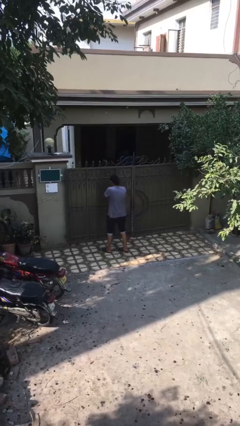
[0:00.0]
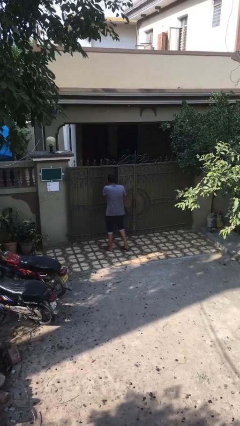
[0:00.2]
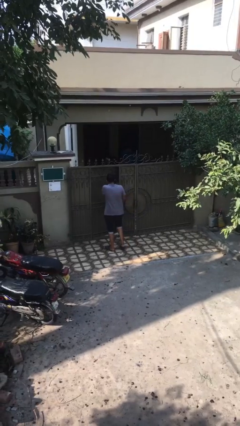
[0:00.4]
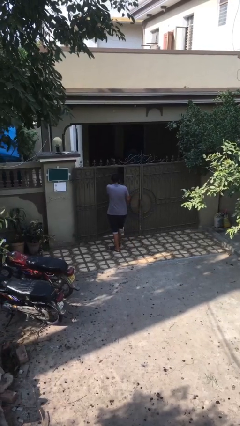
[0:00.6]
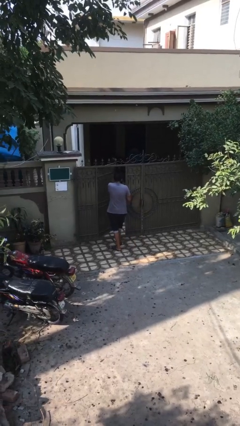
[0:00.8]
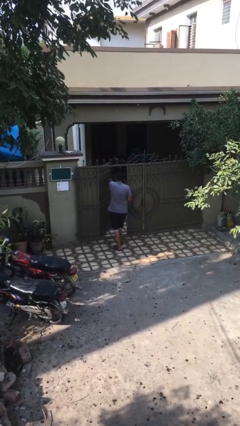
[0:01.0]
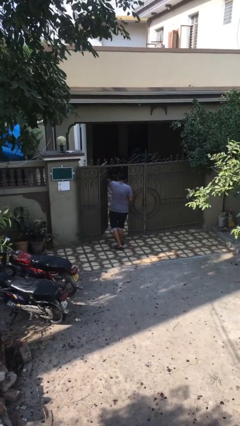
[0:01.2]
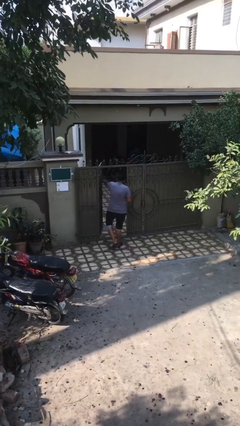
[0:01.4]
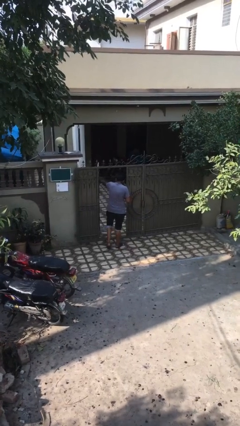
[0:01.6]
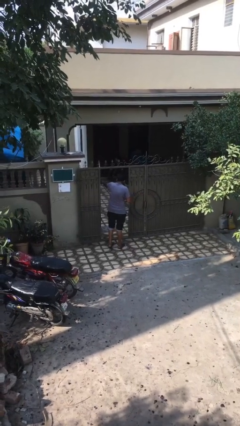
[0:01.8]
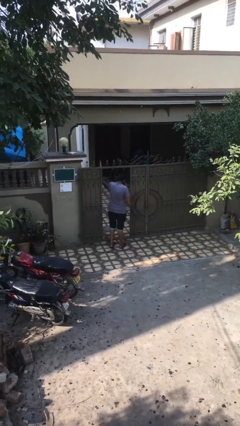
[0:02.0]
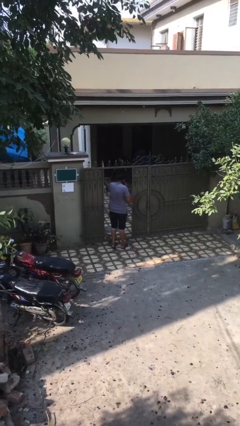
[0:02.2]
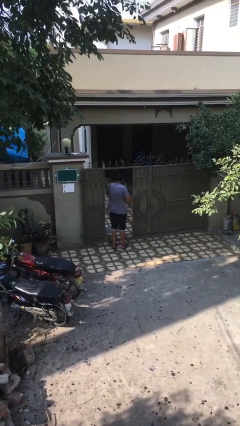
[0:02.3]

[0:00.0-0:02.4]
person opens facility door

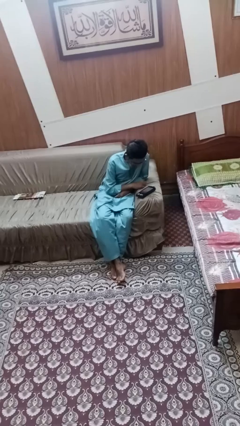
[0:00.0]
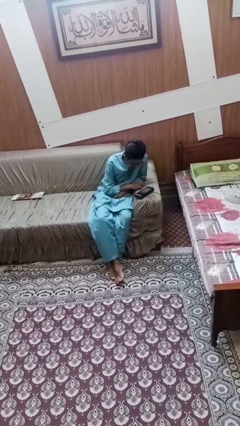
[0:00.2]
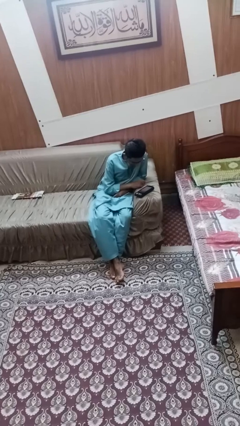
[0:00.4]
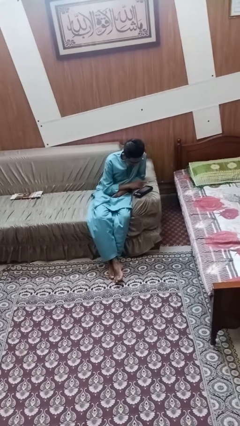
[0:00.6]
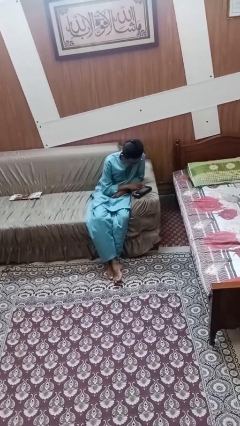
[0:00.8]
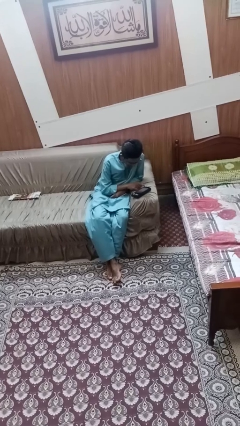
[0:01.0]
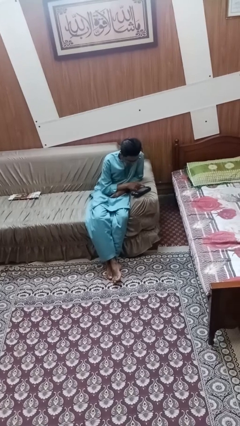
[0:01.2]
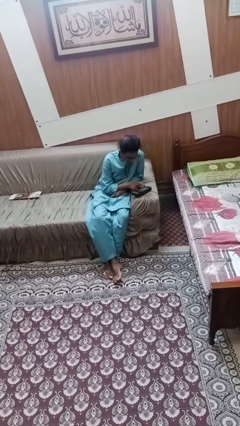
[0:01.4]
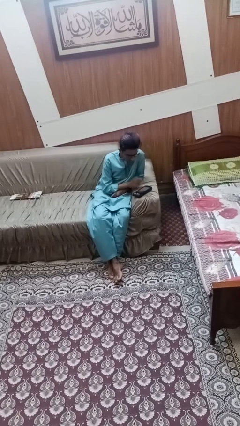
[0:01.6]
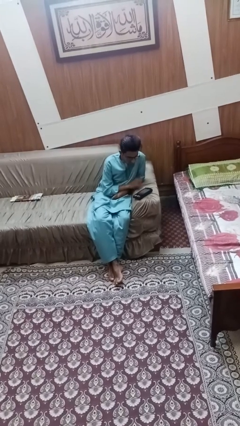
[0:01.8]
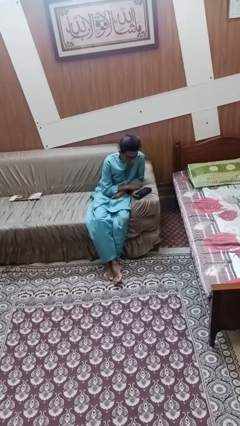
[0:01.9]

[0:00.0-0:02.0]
person interacts with tablet

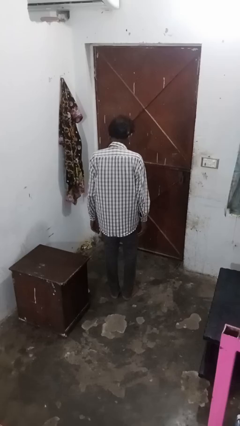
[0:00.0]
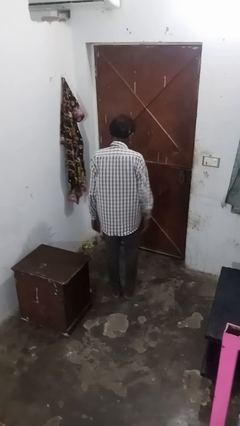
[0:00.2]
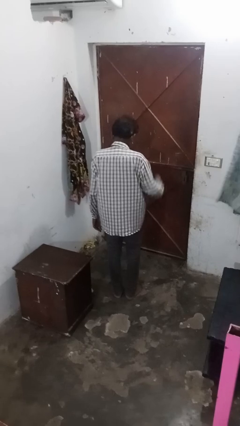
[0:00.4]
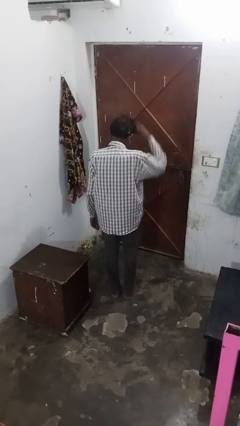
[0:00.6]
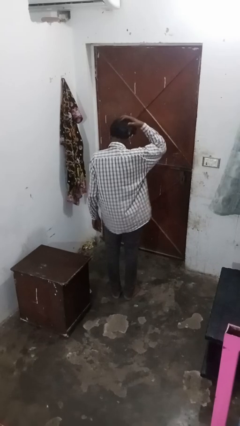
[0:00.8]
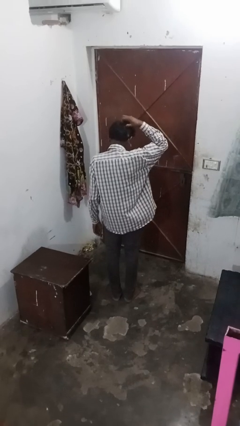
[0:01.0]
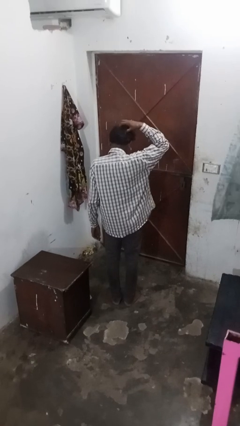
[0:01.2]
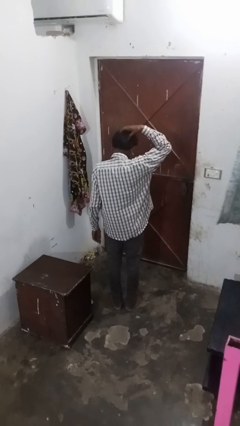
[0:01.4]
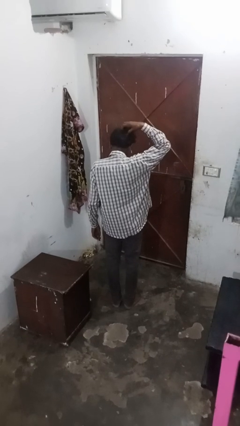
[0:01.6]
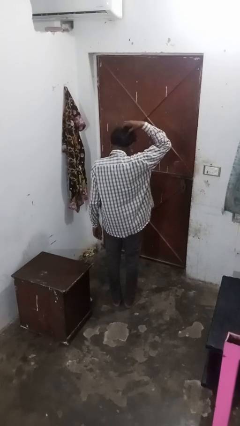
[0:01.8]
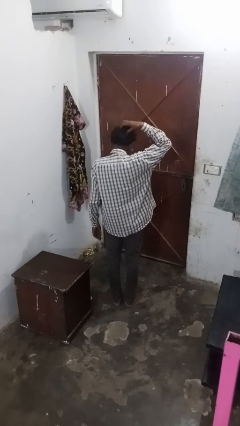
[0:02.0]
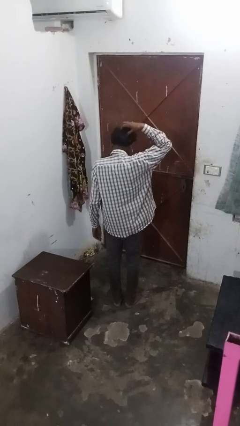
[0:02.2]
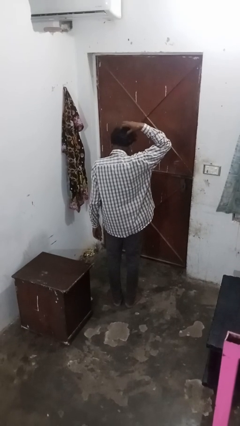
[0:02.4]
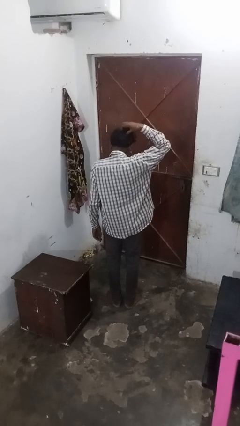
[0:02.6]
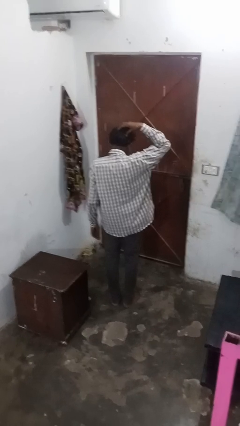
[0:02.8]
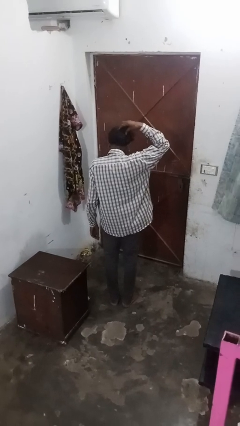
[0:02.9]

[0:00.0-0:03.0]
person strokes hair

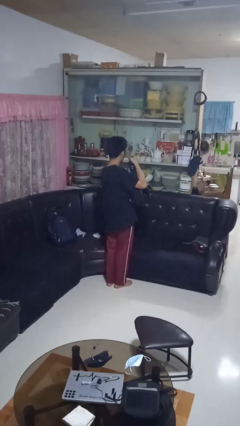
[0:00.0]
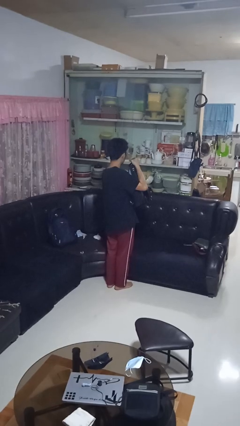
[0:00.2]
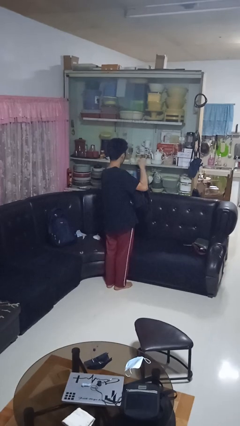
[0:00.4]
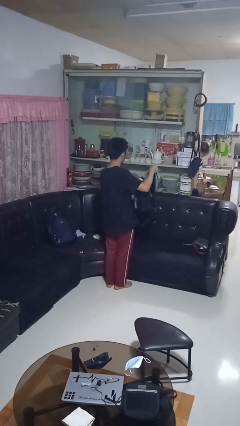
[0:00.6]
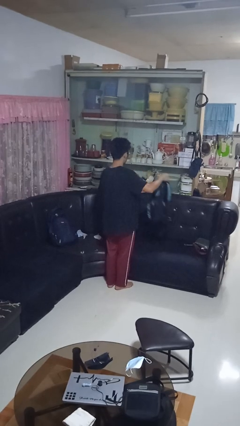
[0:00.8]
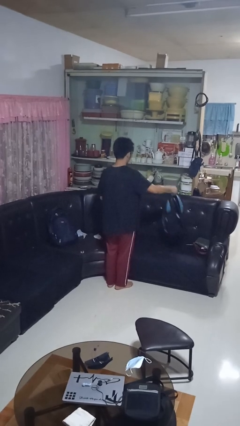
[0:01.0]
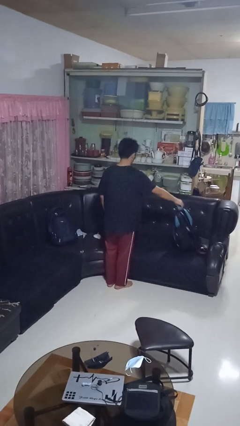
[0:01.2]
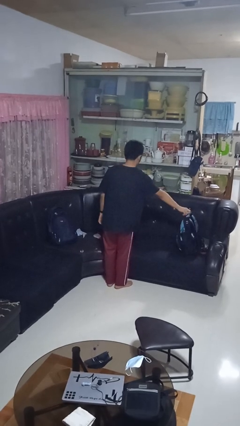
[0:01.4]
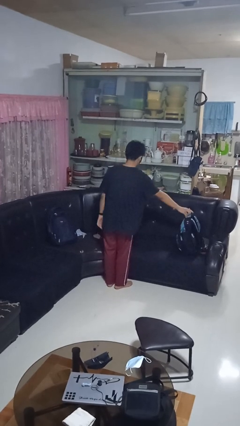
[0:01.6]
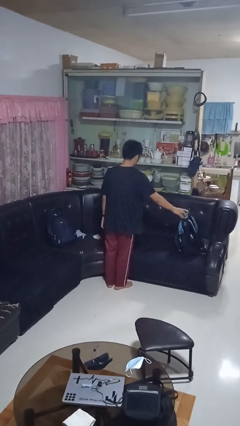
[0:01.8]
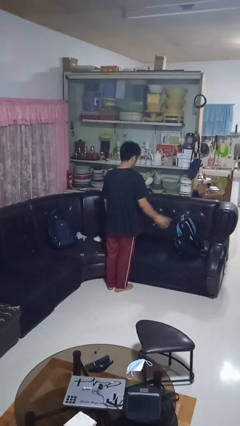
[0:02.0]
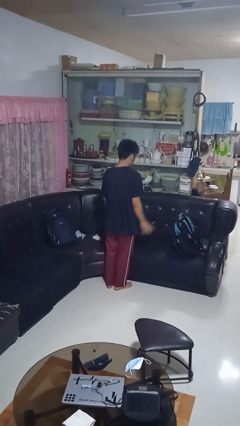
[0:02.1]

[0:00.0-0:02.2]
person puts down object on couch

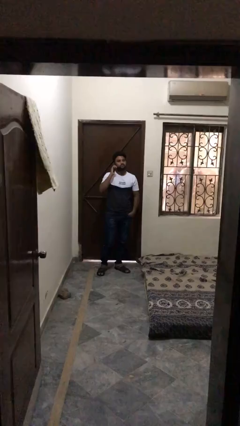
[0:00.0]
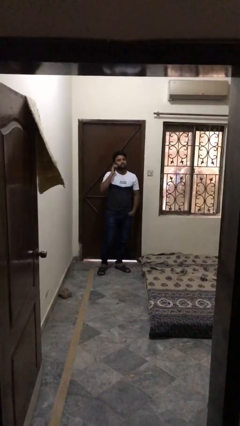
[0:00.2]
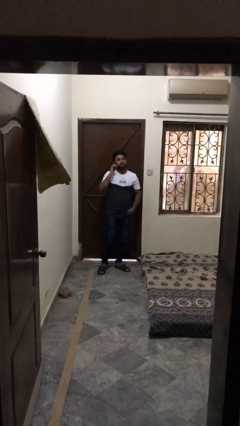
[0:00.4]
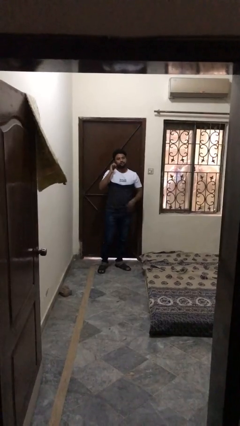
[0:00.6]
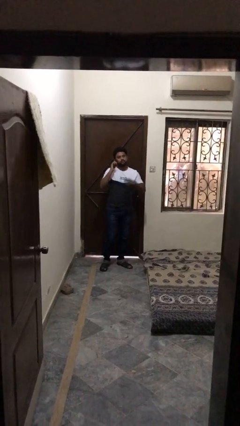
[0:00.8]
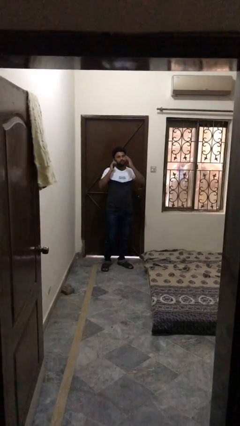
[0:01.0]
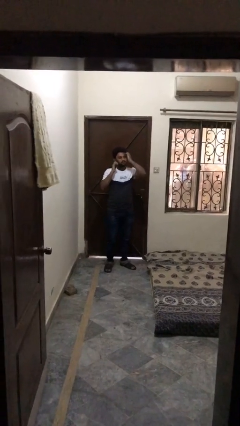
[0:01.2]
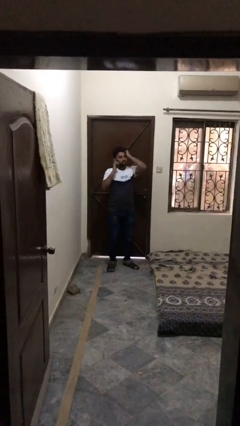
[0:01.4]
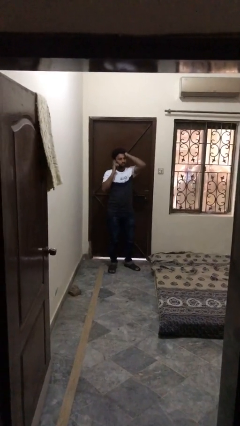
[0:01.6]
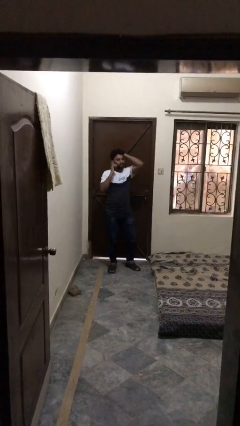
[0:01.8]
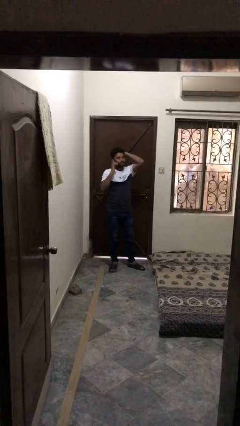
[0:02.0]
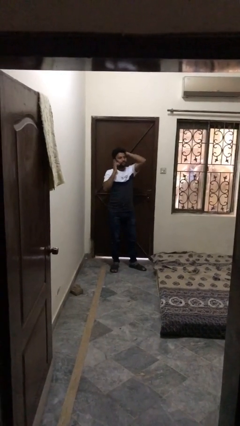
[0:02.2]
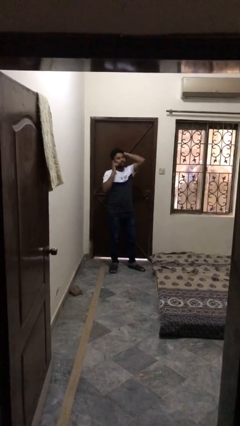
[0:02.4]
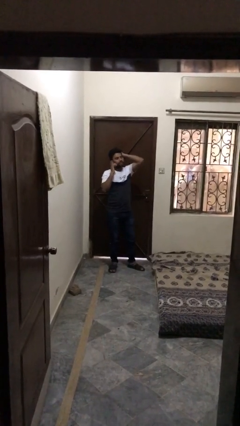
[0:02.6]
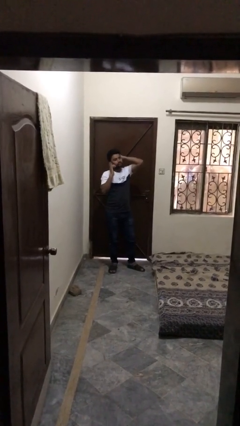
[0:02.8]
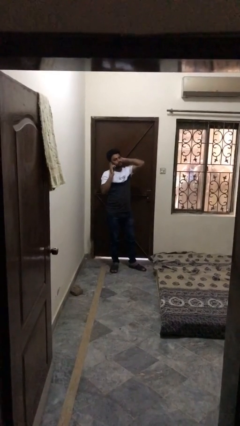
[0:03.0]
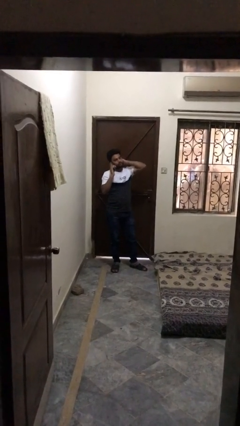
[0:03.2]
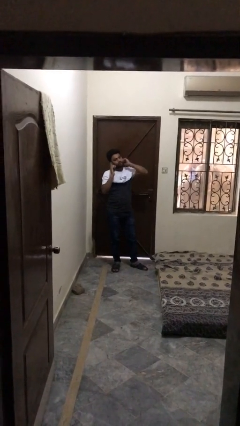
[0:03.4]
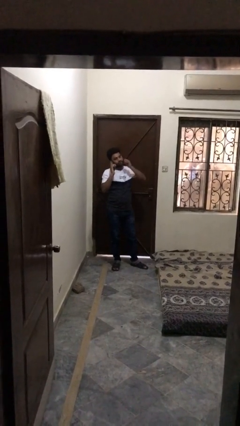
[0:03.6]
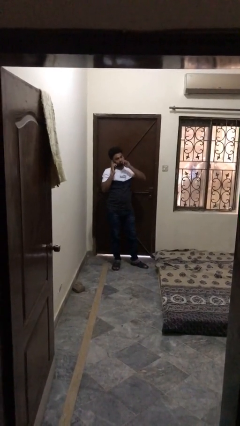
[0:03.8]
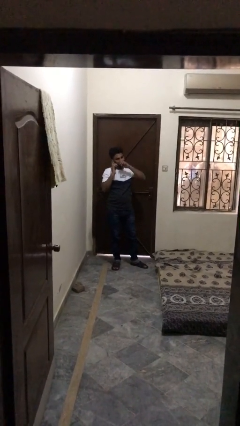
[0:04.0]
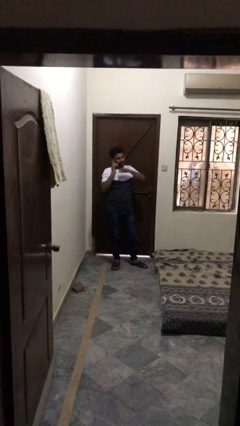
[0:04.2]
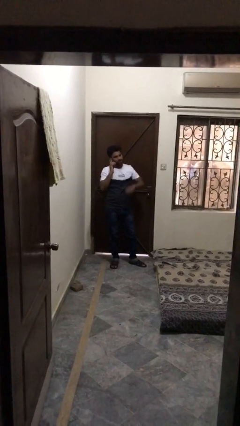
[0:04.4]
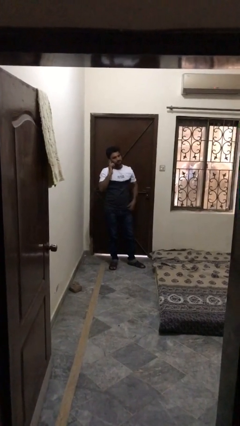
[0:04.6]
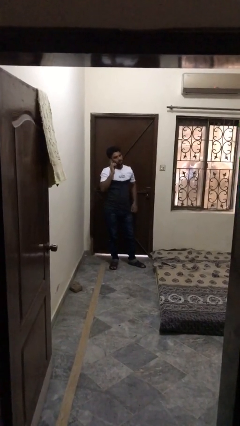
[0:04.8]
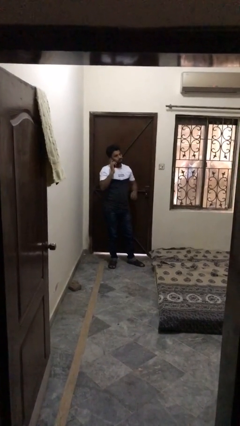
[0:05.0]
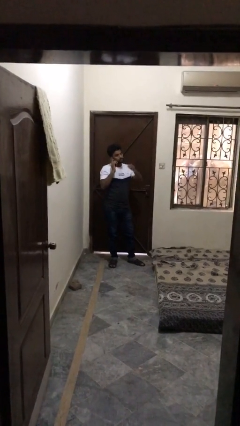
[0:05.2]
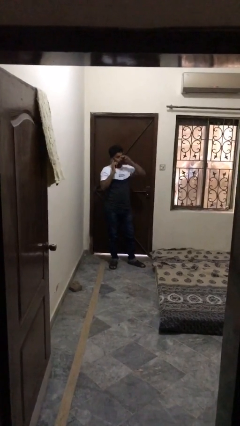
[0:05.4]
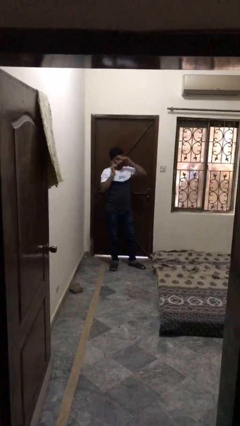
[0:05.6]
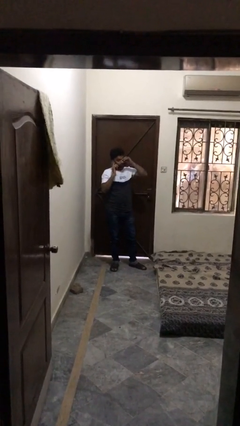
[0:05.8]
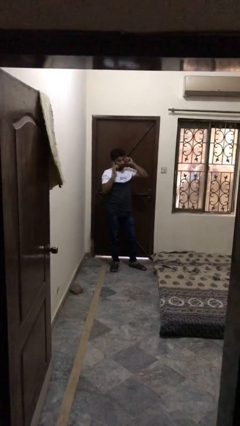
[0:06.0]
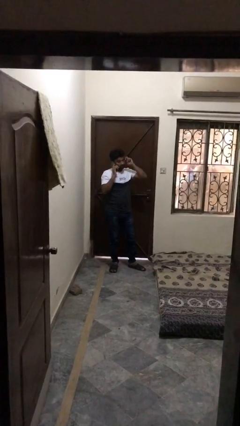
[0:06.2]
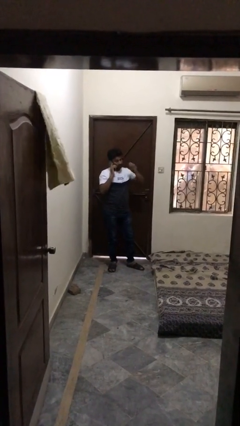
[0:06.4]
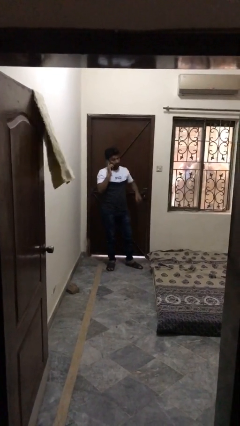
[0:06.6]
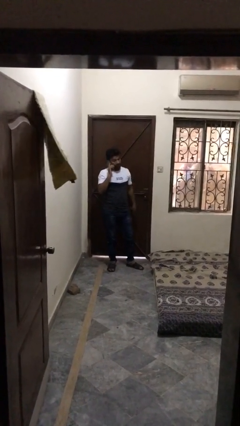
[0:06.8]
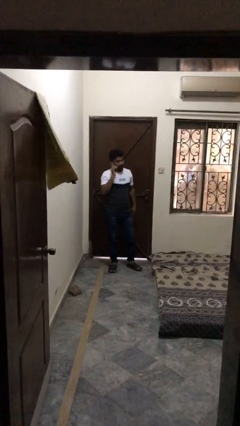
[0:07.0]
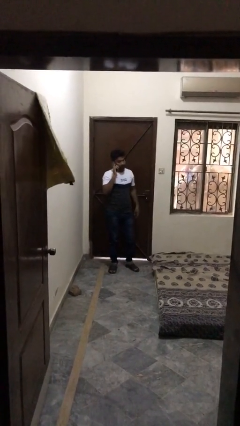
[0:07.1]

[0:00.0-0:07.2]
person talks on phone

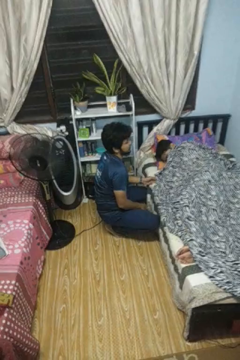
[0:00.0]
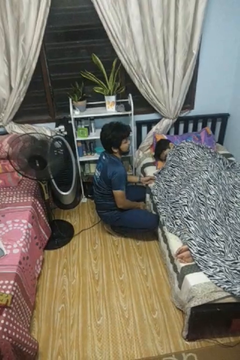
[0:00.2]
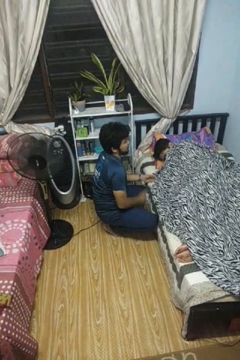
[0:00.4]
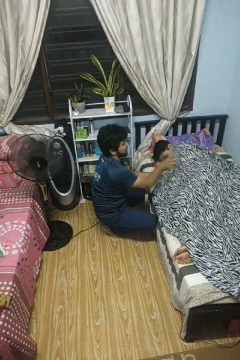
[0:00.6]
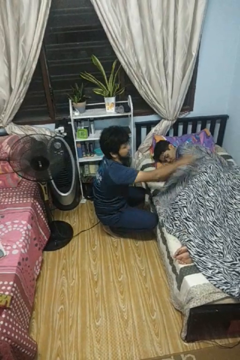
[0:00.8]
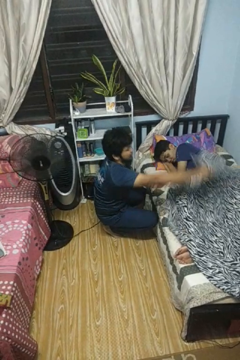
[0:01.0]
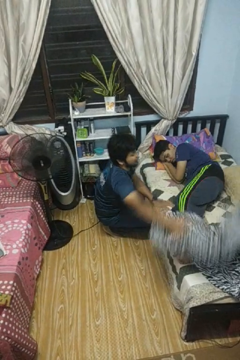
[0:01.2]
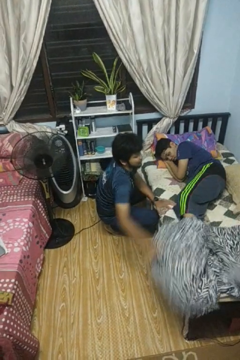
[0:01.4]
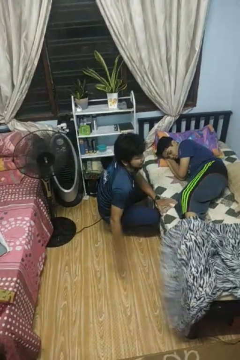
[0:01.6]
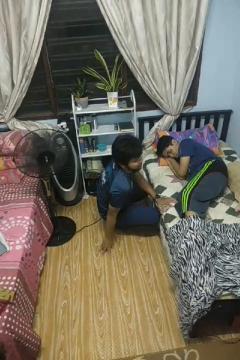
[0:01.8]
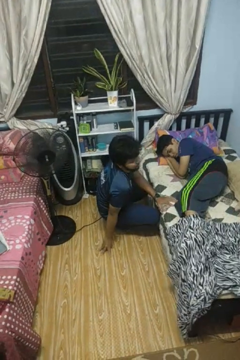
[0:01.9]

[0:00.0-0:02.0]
person uncovers friend with blanket
